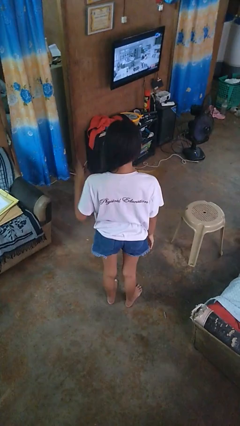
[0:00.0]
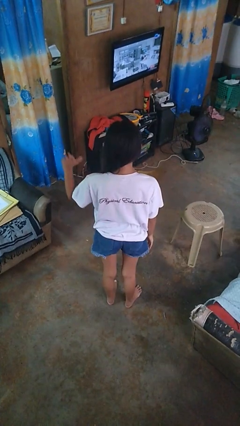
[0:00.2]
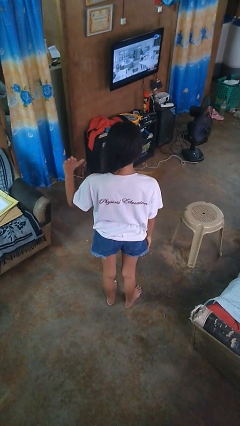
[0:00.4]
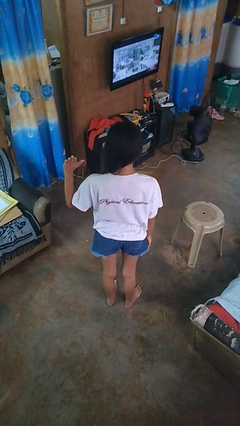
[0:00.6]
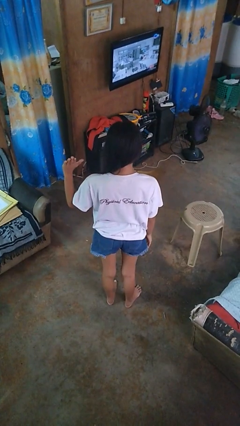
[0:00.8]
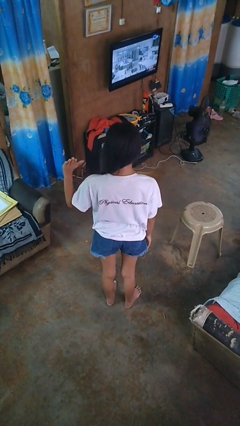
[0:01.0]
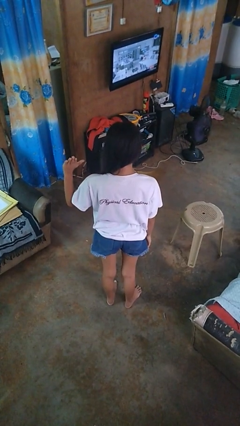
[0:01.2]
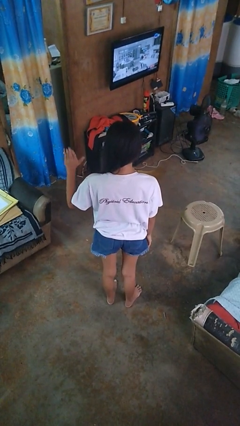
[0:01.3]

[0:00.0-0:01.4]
person gestures number five

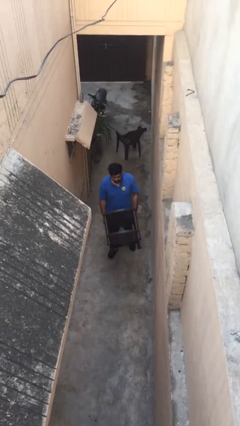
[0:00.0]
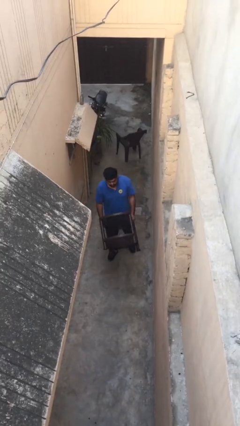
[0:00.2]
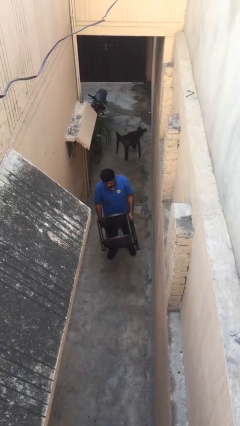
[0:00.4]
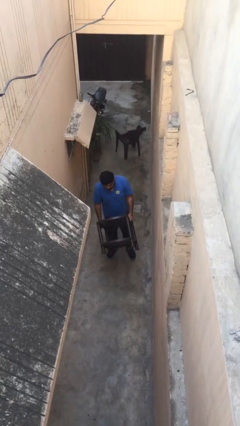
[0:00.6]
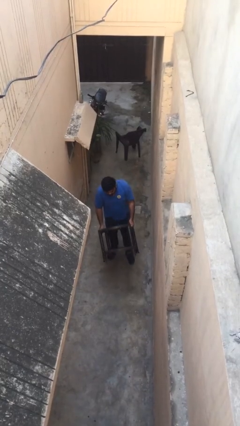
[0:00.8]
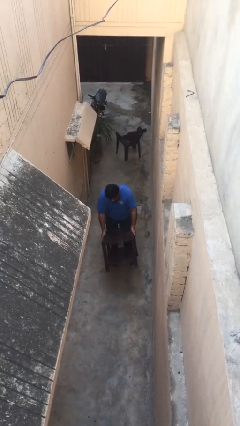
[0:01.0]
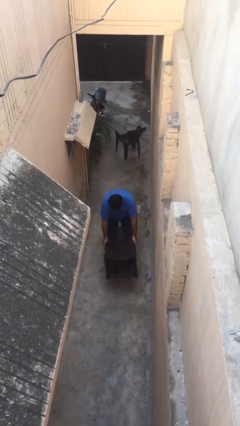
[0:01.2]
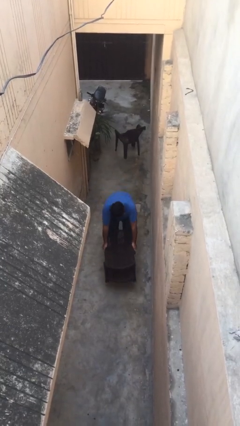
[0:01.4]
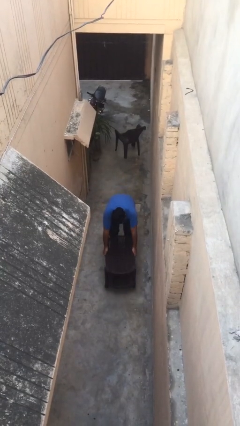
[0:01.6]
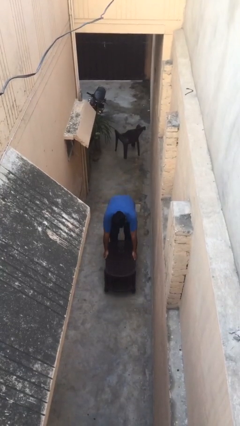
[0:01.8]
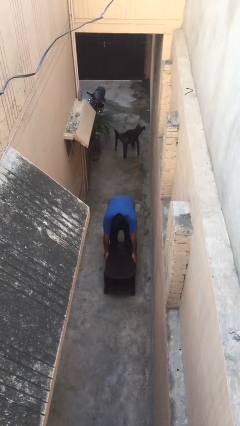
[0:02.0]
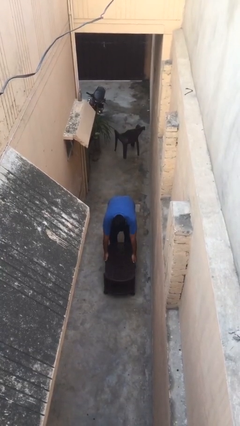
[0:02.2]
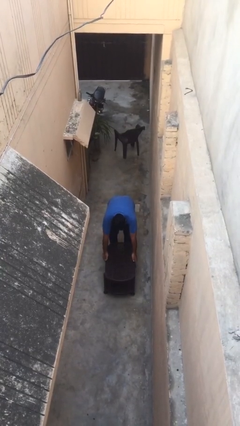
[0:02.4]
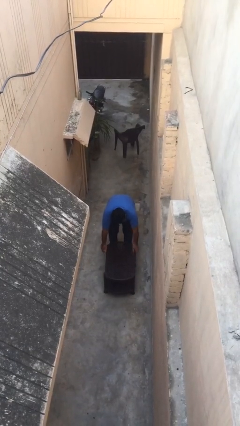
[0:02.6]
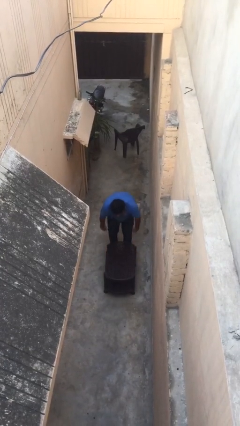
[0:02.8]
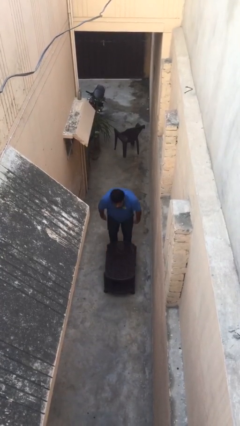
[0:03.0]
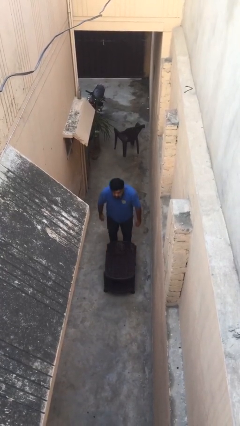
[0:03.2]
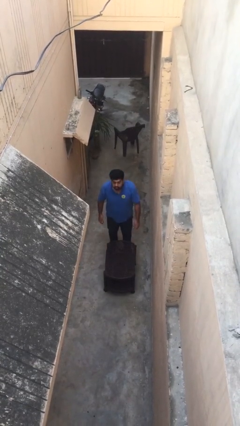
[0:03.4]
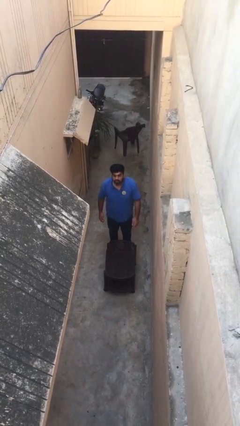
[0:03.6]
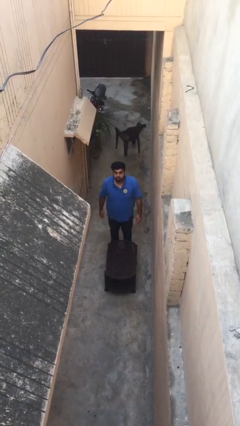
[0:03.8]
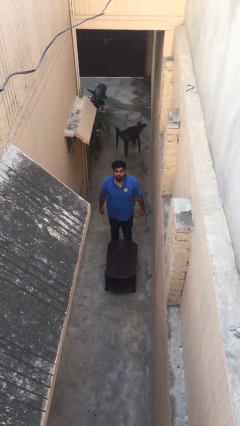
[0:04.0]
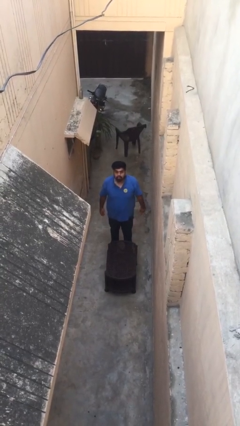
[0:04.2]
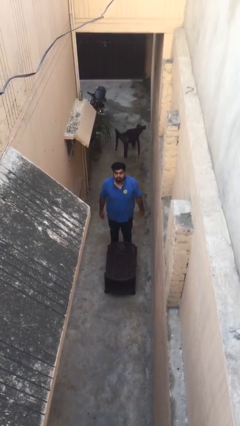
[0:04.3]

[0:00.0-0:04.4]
person puts down object on floor

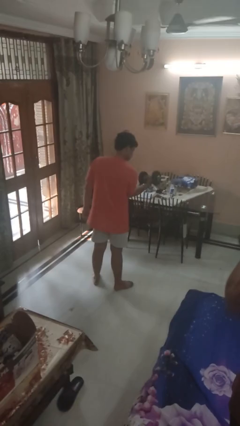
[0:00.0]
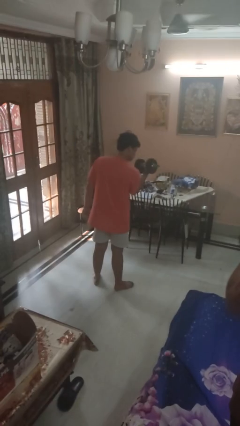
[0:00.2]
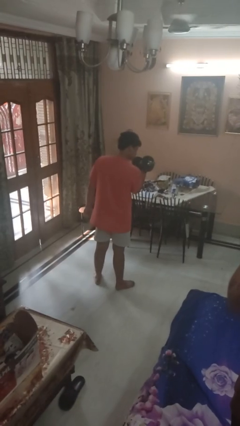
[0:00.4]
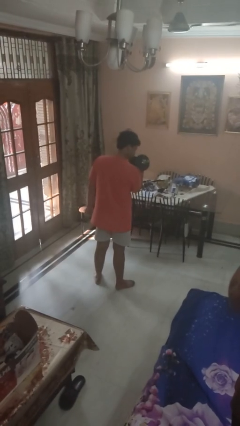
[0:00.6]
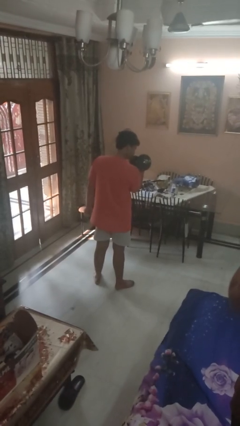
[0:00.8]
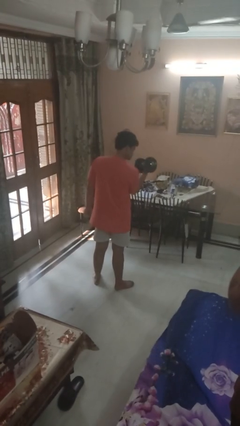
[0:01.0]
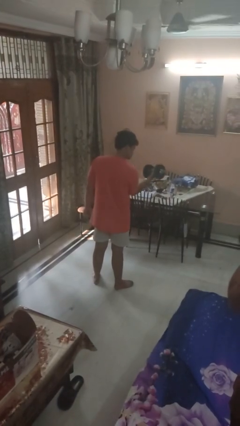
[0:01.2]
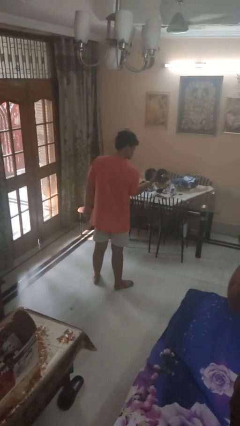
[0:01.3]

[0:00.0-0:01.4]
person lifts dumbbells

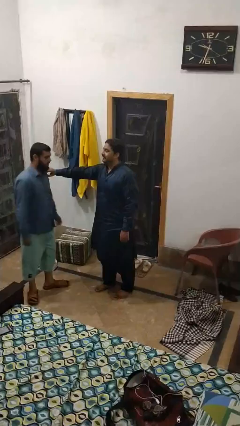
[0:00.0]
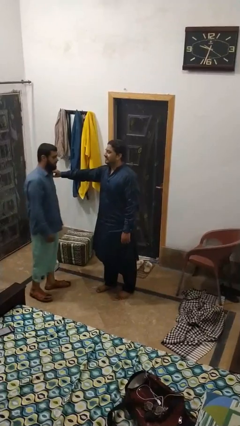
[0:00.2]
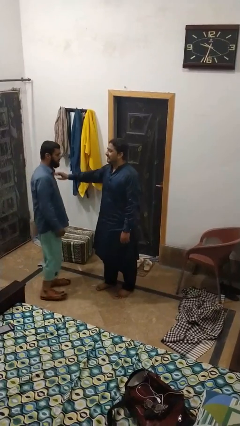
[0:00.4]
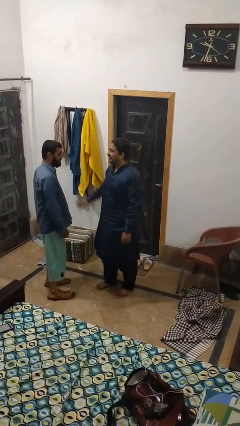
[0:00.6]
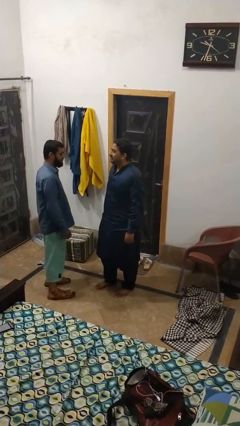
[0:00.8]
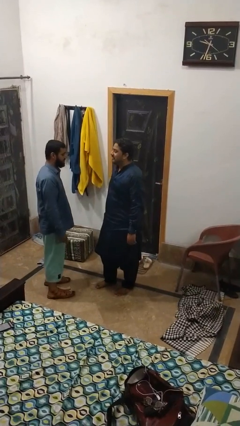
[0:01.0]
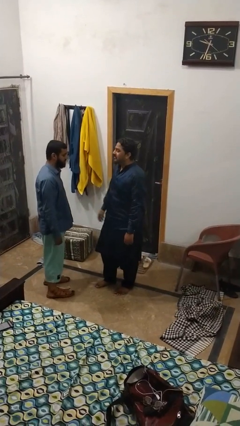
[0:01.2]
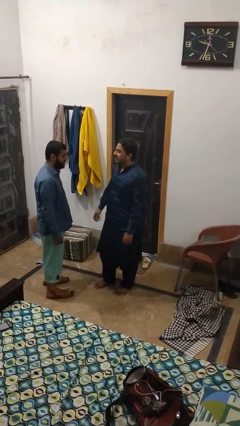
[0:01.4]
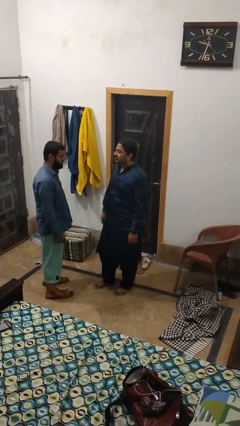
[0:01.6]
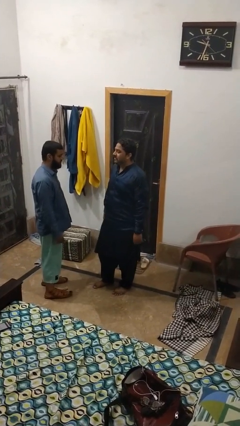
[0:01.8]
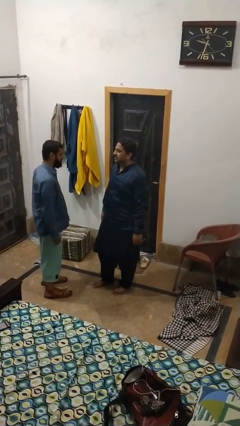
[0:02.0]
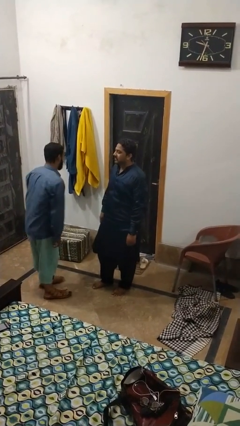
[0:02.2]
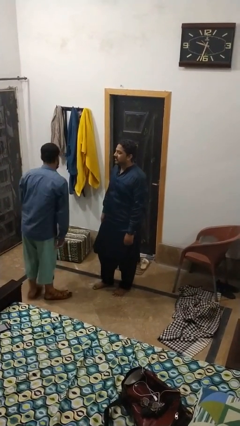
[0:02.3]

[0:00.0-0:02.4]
person spins person around

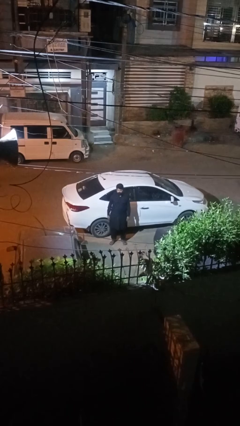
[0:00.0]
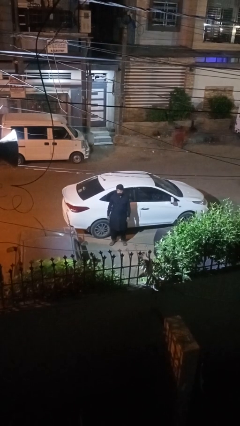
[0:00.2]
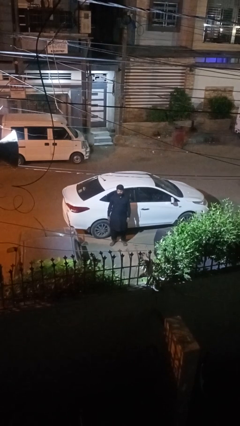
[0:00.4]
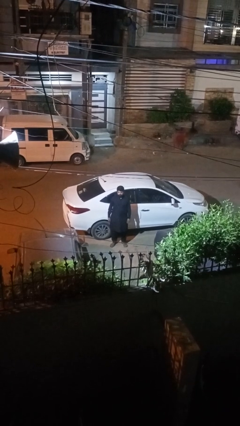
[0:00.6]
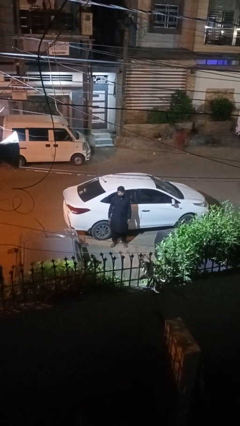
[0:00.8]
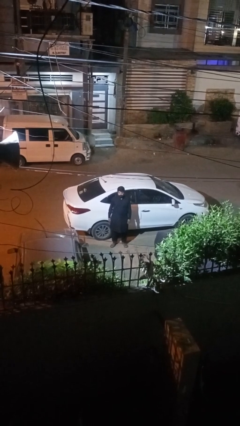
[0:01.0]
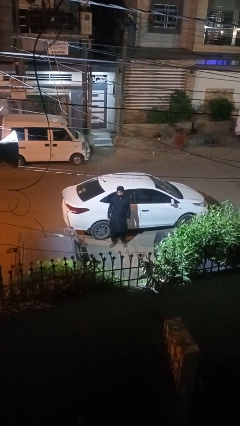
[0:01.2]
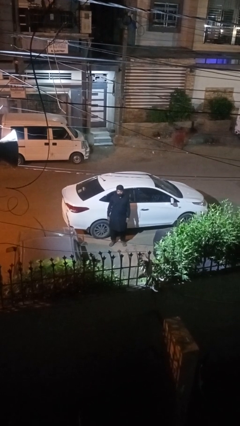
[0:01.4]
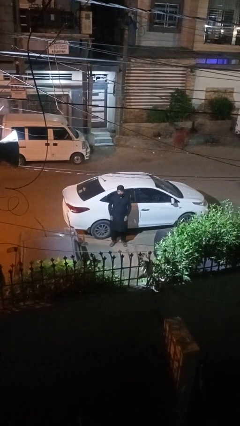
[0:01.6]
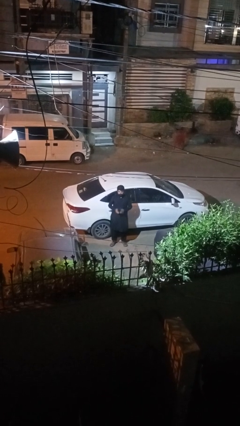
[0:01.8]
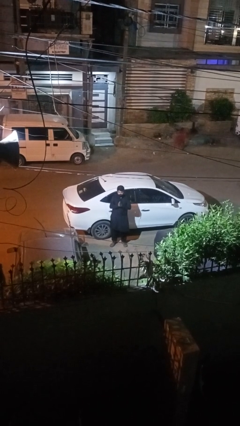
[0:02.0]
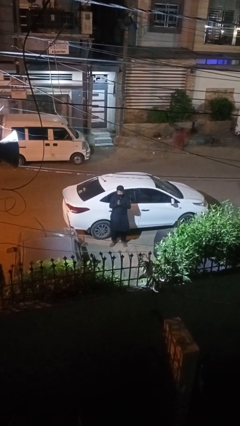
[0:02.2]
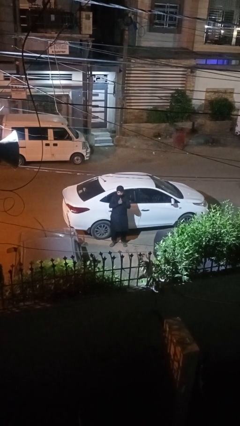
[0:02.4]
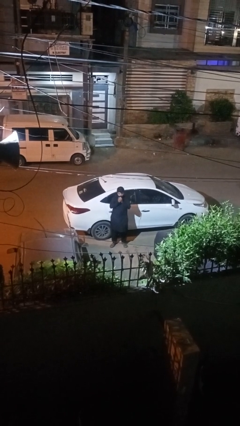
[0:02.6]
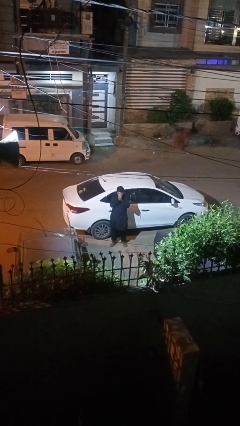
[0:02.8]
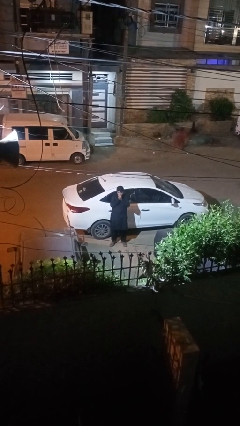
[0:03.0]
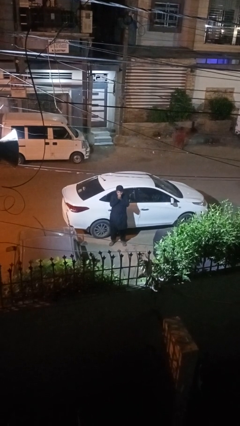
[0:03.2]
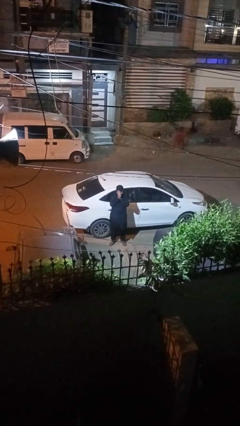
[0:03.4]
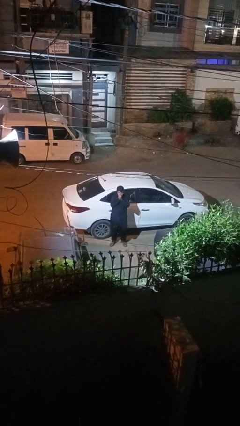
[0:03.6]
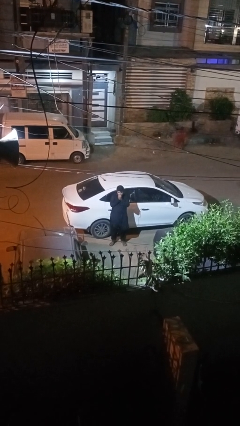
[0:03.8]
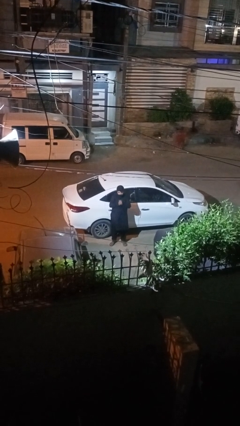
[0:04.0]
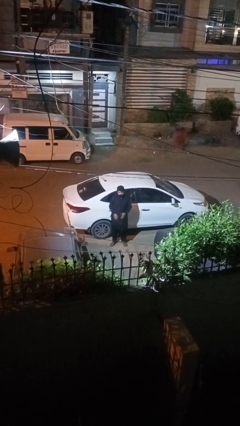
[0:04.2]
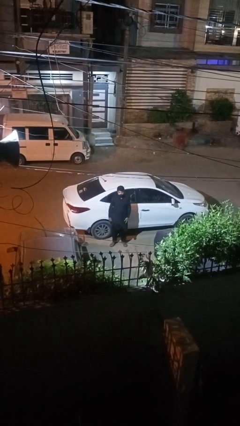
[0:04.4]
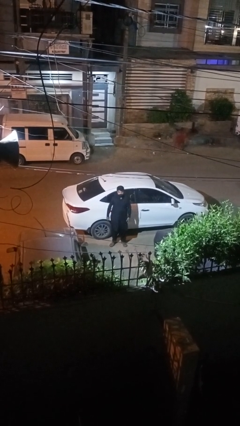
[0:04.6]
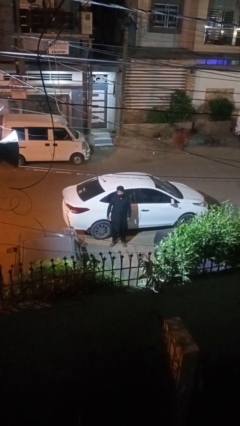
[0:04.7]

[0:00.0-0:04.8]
person blows into hands

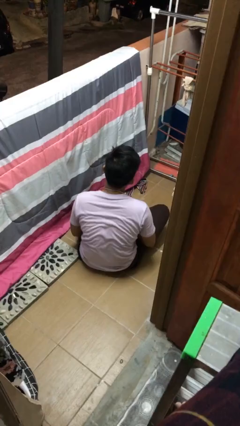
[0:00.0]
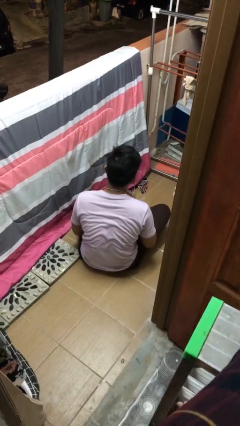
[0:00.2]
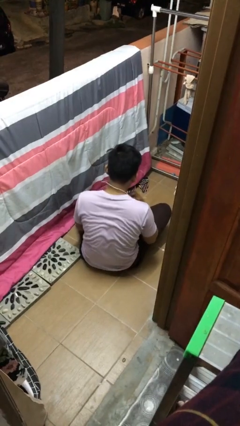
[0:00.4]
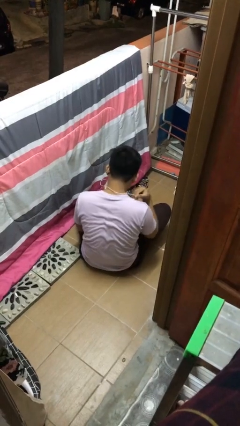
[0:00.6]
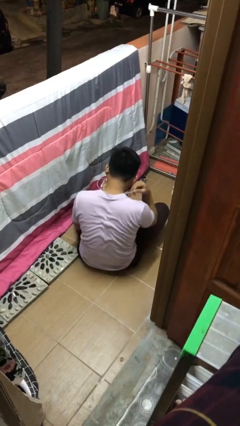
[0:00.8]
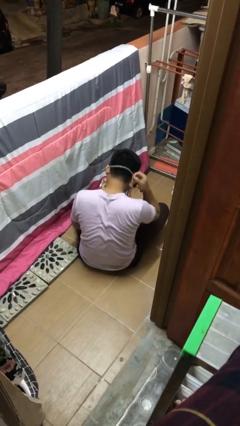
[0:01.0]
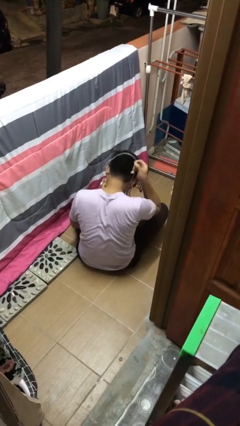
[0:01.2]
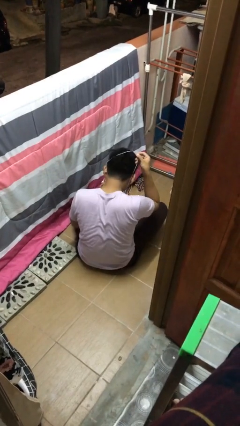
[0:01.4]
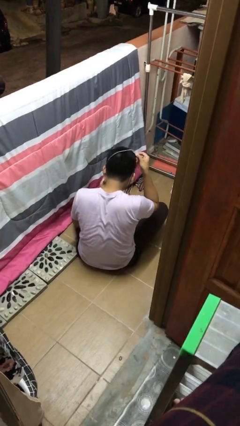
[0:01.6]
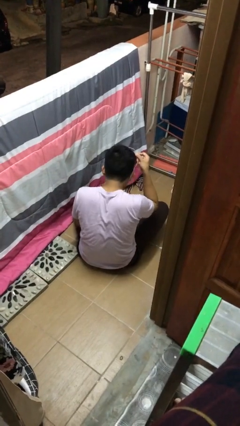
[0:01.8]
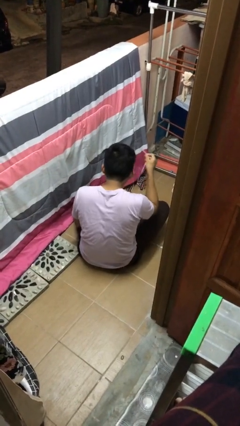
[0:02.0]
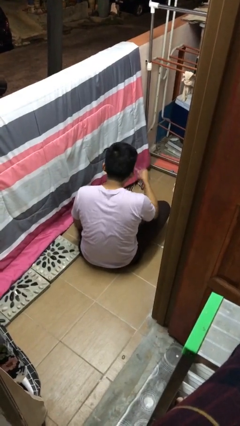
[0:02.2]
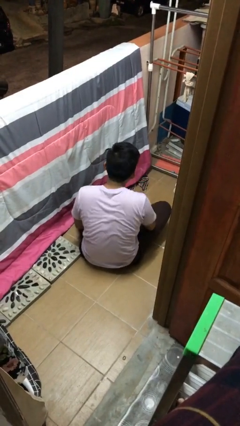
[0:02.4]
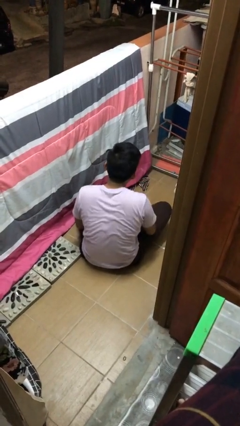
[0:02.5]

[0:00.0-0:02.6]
person takes off necklace

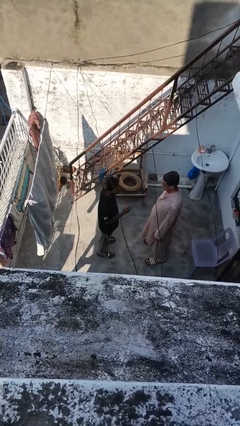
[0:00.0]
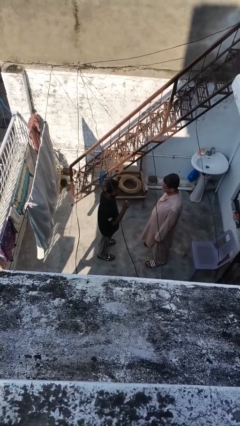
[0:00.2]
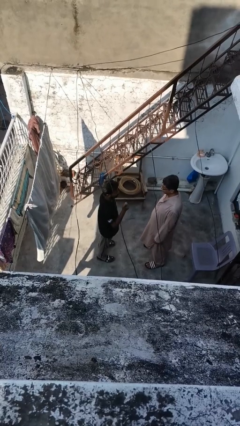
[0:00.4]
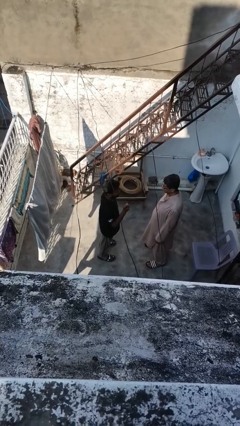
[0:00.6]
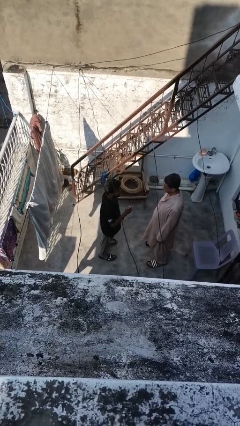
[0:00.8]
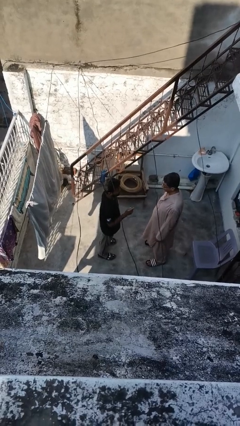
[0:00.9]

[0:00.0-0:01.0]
person points at person
